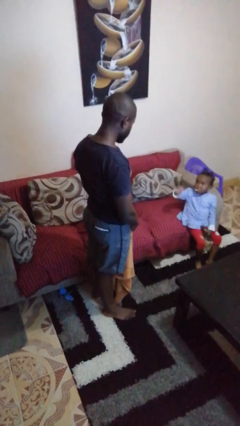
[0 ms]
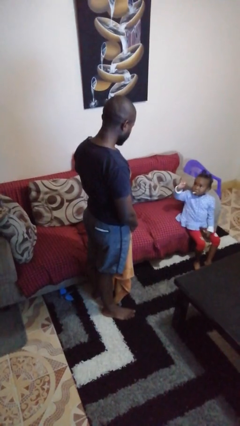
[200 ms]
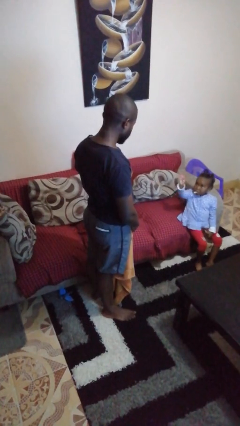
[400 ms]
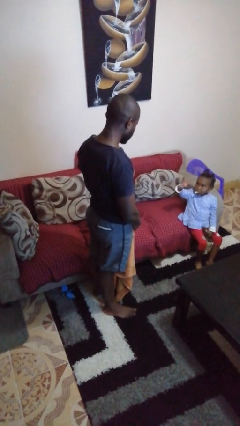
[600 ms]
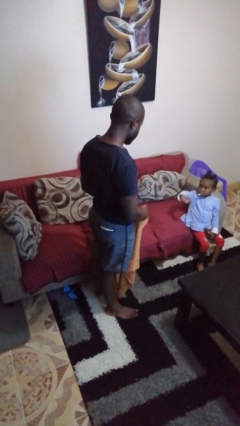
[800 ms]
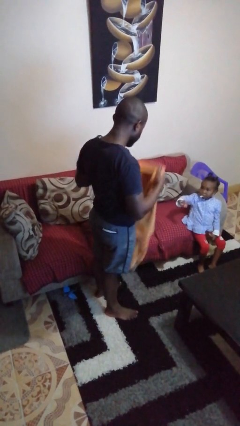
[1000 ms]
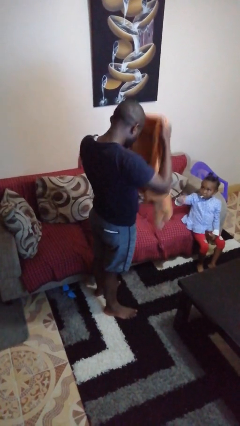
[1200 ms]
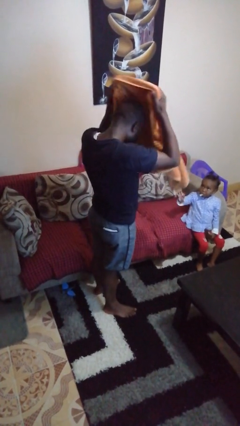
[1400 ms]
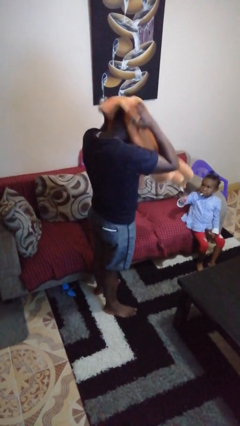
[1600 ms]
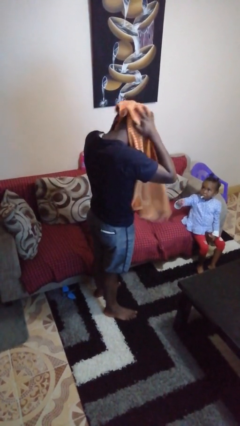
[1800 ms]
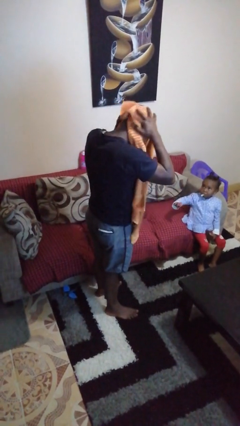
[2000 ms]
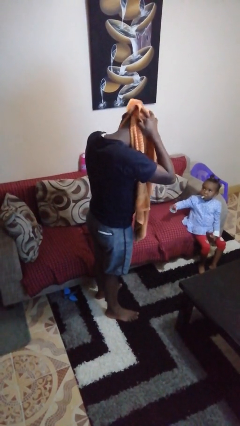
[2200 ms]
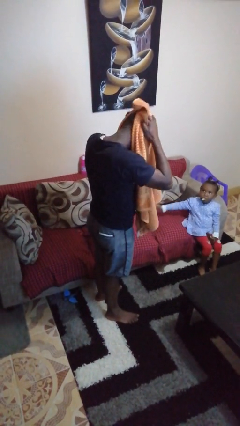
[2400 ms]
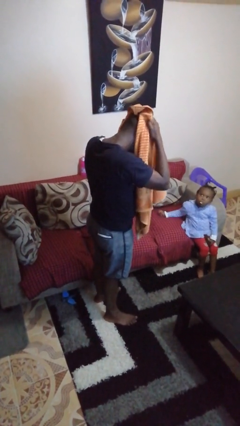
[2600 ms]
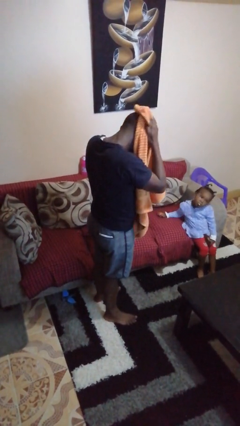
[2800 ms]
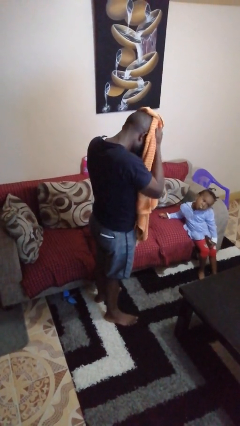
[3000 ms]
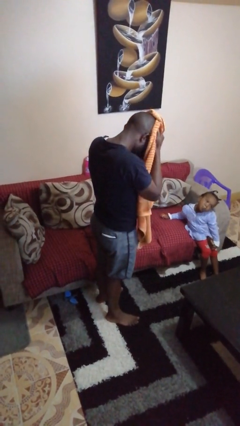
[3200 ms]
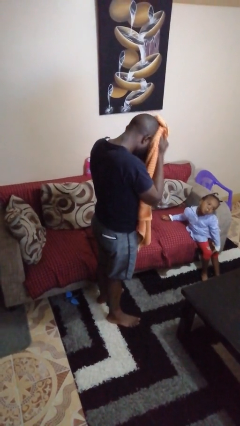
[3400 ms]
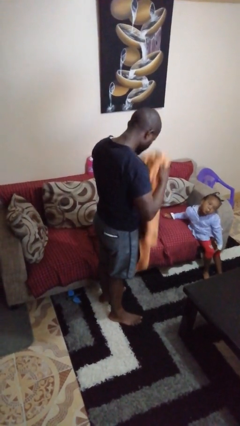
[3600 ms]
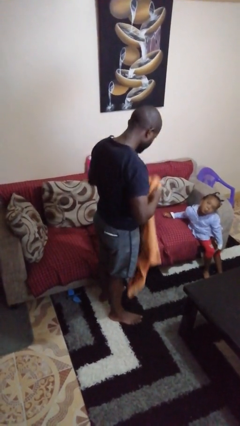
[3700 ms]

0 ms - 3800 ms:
person dries hair with towel

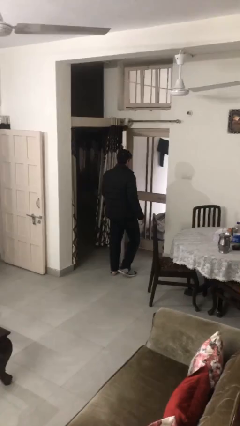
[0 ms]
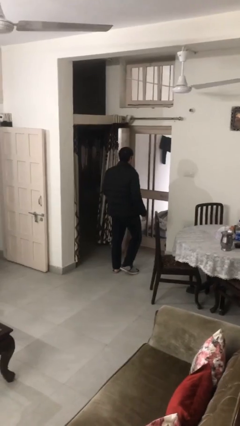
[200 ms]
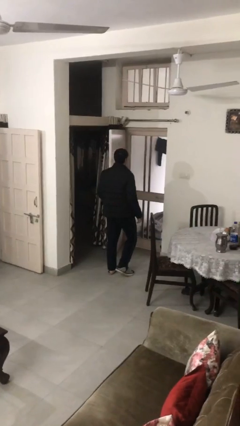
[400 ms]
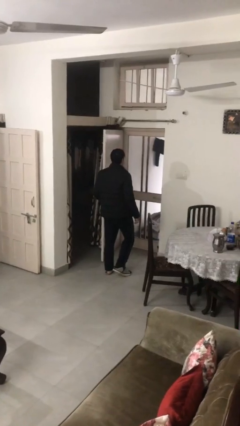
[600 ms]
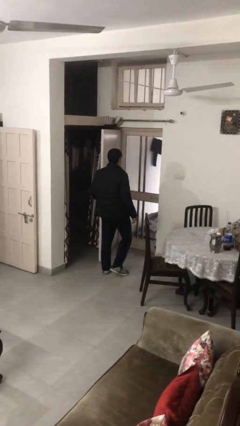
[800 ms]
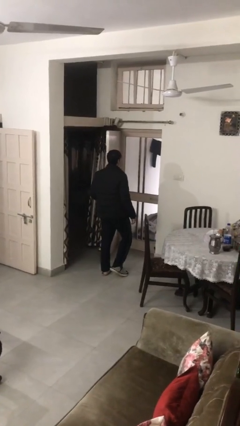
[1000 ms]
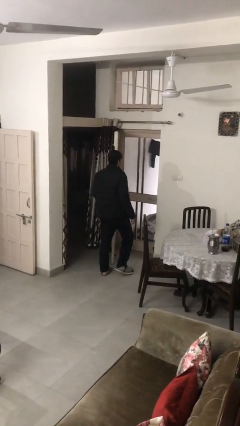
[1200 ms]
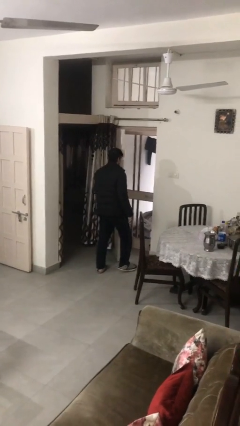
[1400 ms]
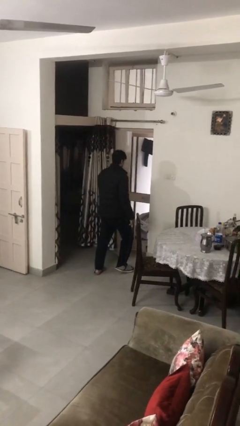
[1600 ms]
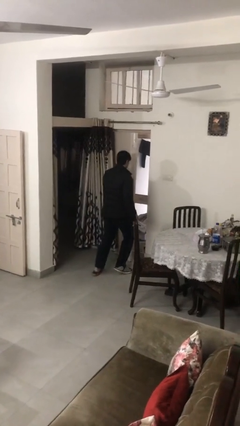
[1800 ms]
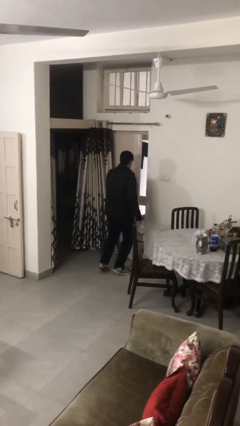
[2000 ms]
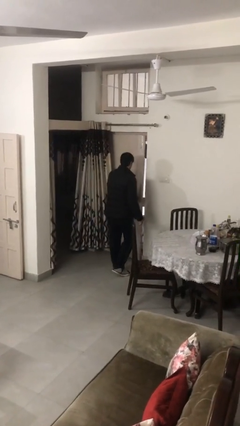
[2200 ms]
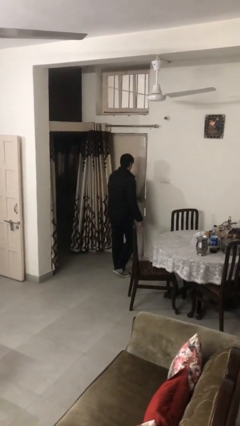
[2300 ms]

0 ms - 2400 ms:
person closes facility door

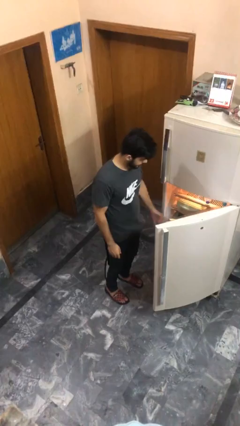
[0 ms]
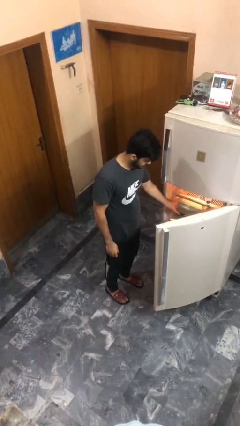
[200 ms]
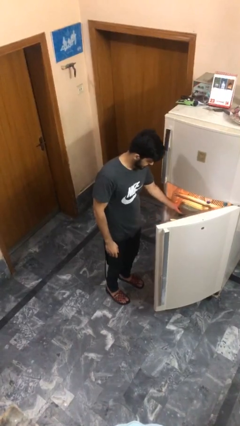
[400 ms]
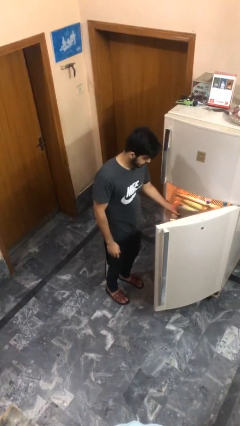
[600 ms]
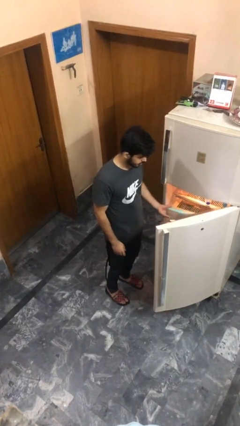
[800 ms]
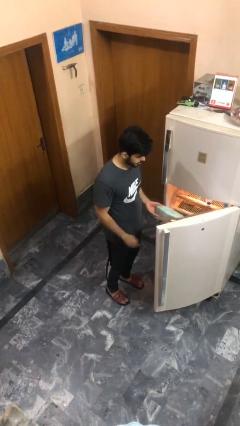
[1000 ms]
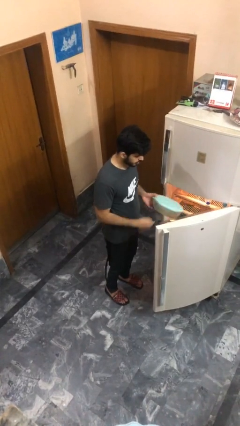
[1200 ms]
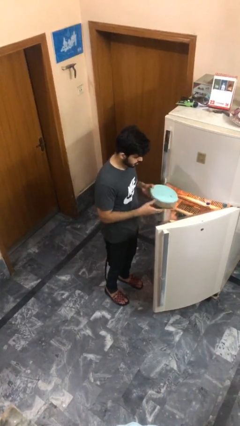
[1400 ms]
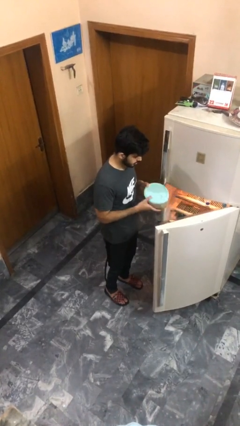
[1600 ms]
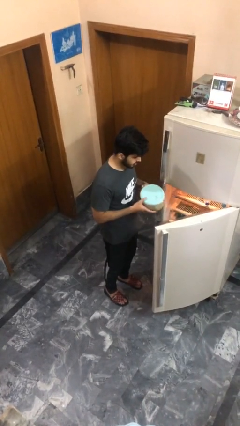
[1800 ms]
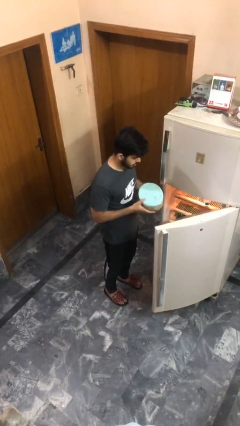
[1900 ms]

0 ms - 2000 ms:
person picks up object from cabinet

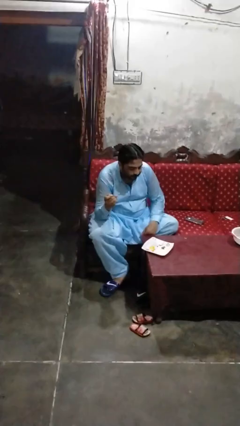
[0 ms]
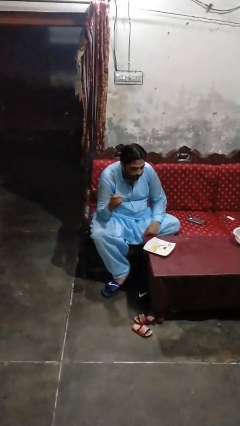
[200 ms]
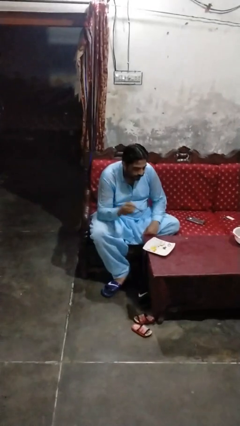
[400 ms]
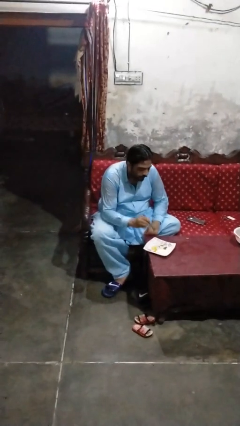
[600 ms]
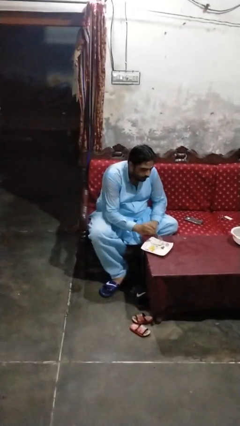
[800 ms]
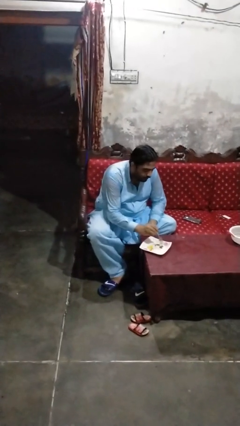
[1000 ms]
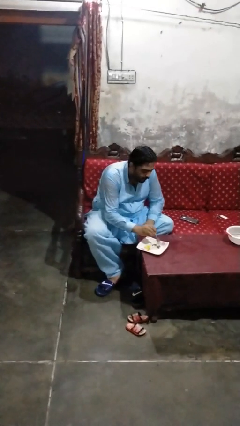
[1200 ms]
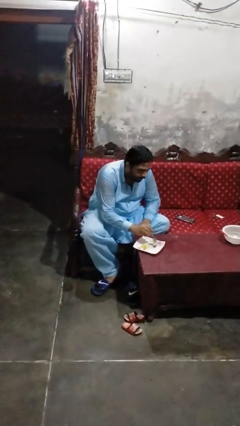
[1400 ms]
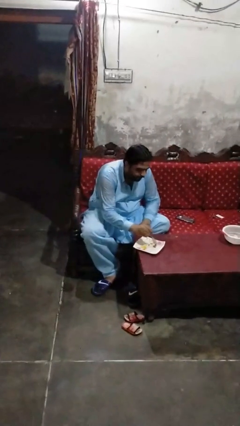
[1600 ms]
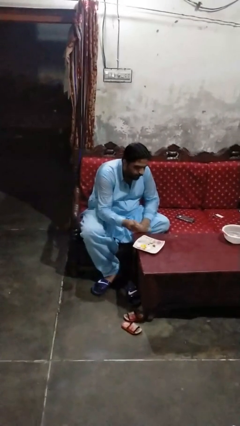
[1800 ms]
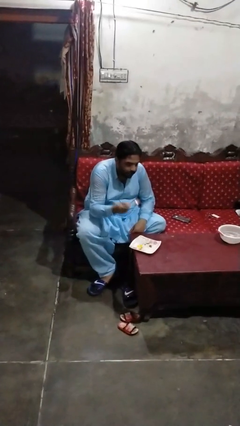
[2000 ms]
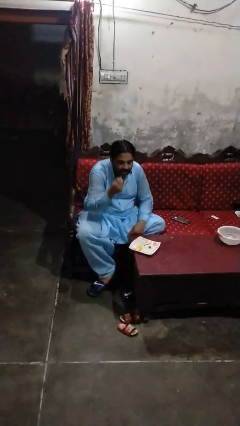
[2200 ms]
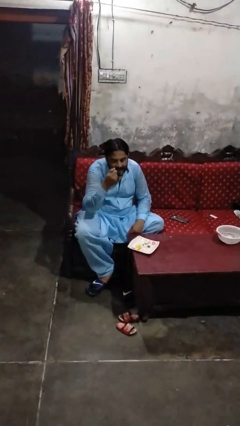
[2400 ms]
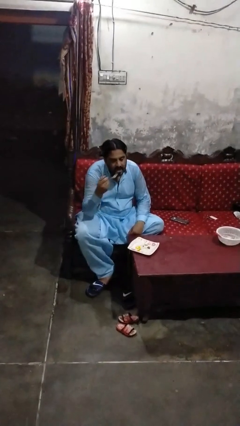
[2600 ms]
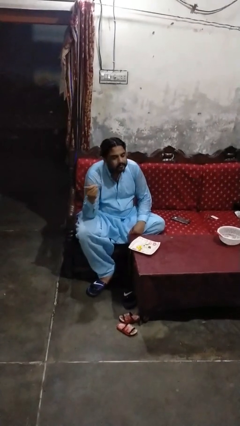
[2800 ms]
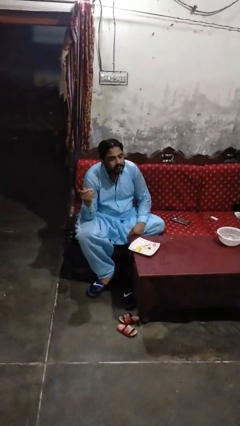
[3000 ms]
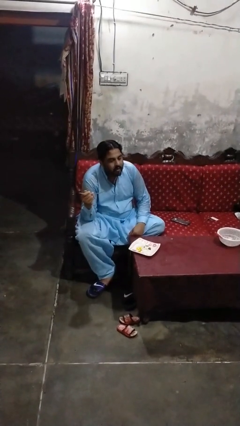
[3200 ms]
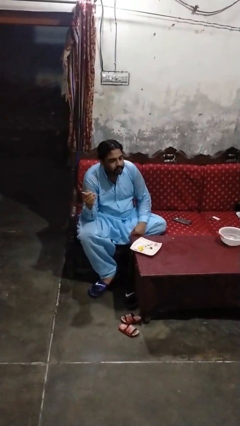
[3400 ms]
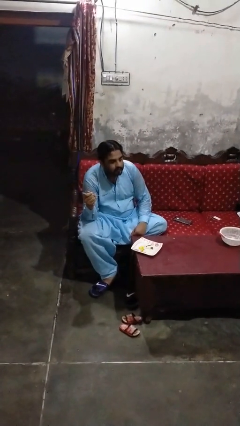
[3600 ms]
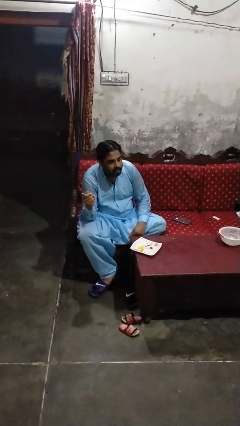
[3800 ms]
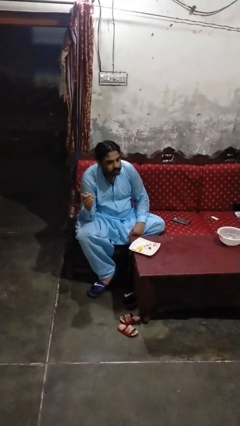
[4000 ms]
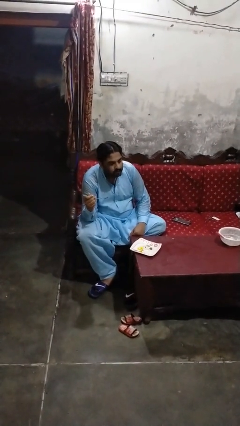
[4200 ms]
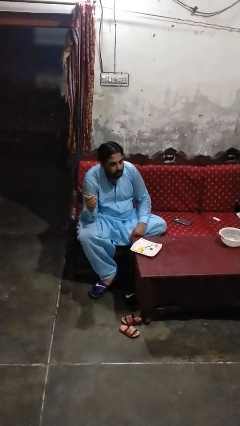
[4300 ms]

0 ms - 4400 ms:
person eats with utensil

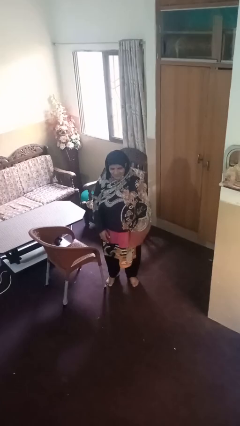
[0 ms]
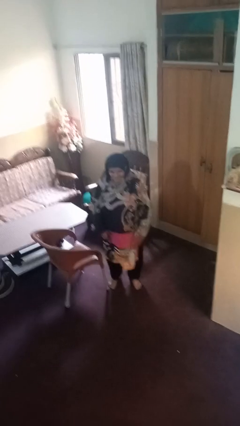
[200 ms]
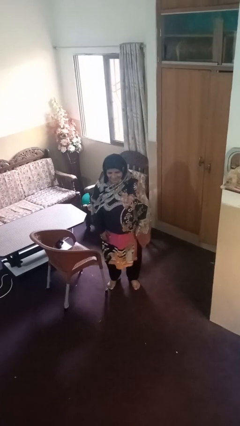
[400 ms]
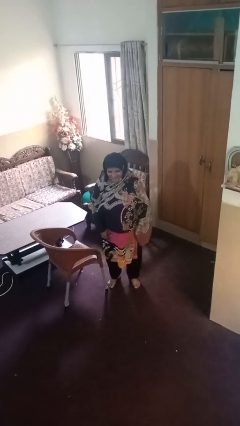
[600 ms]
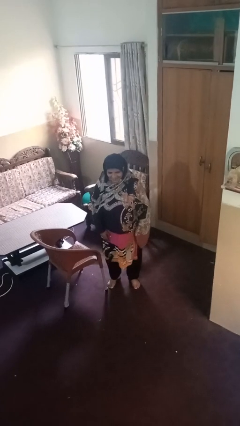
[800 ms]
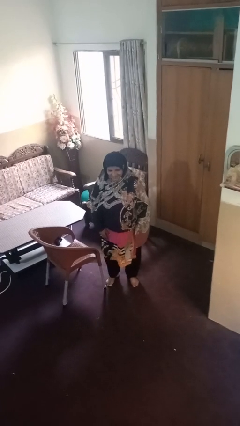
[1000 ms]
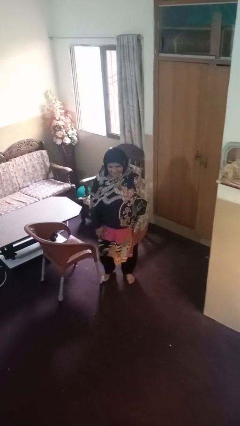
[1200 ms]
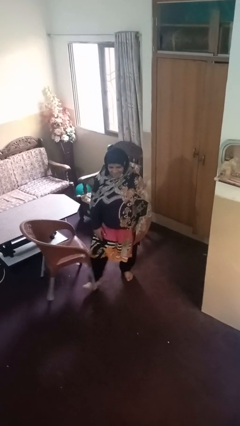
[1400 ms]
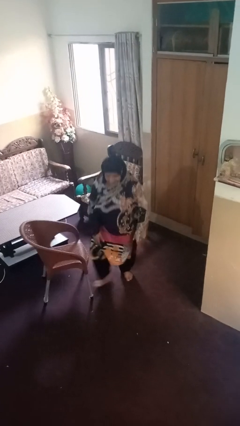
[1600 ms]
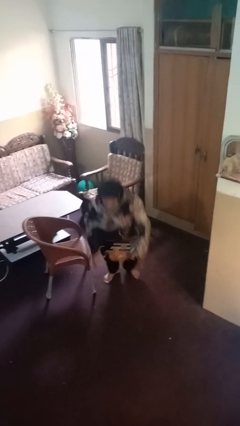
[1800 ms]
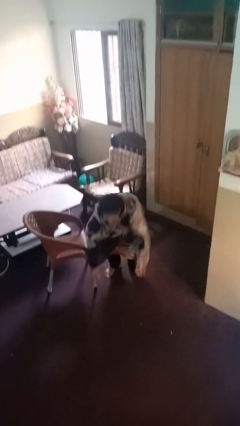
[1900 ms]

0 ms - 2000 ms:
person trips on object on floor

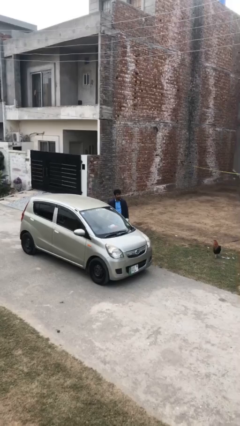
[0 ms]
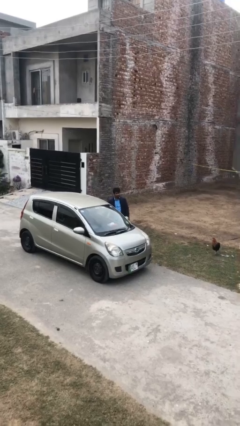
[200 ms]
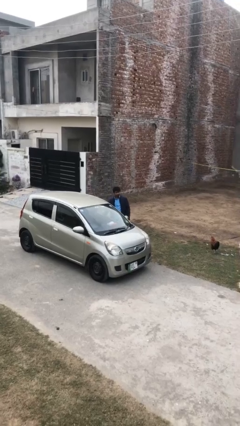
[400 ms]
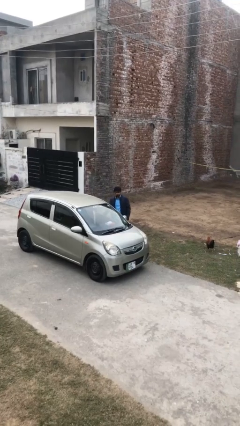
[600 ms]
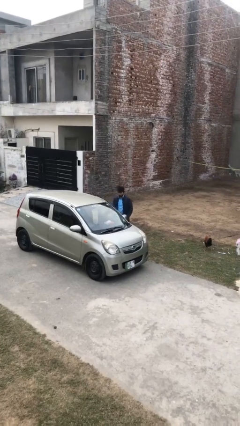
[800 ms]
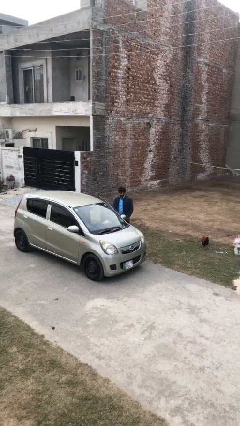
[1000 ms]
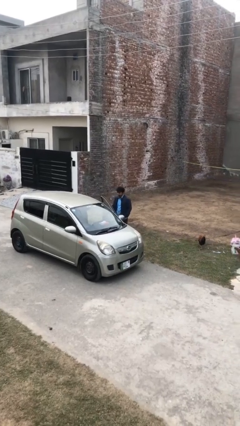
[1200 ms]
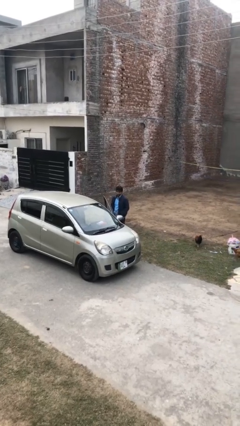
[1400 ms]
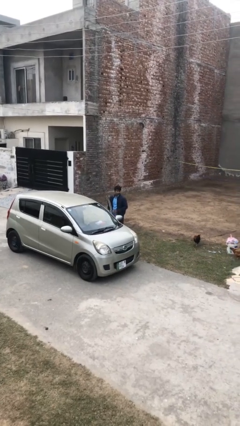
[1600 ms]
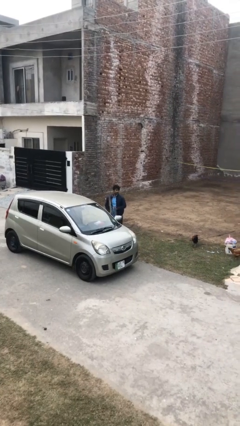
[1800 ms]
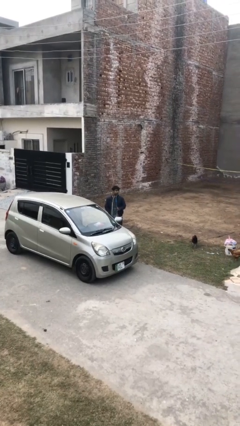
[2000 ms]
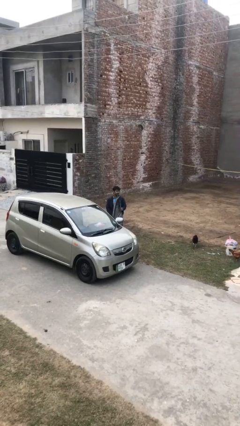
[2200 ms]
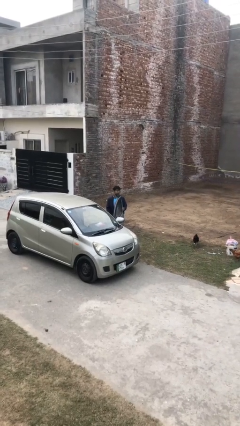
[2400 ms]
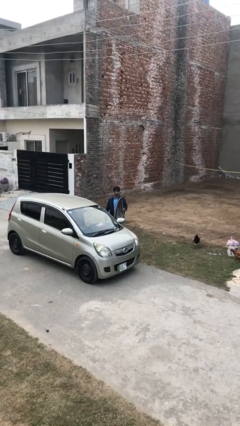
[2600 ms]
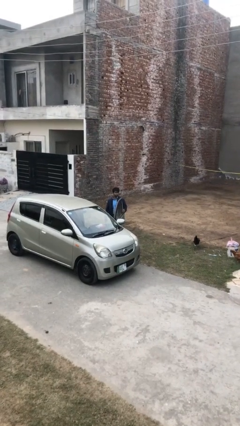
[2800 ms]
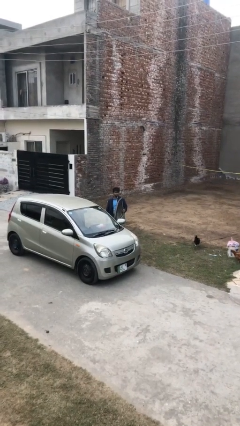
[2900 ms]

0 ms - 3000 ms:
person opens car door
